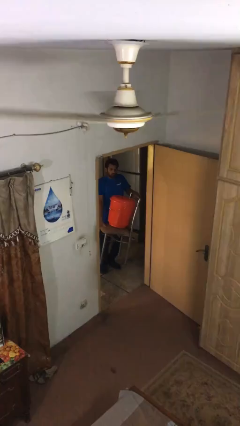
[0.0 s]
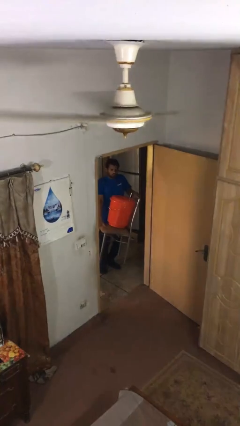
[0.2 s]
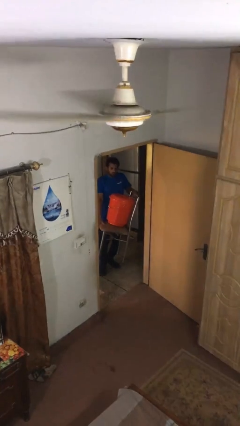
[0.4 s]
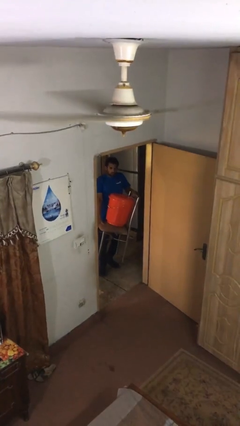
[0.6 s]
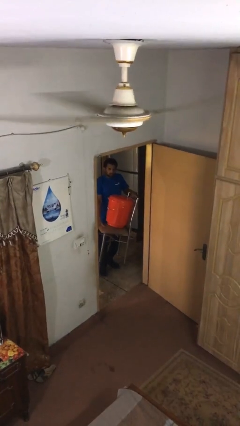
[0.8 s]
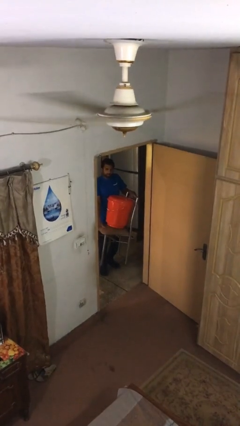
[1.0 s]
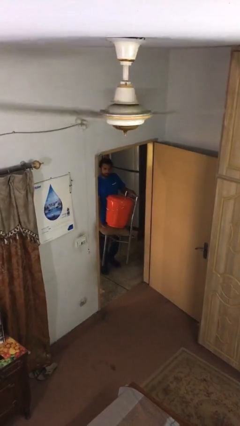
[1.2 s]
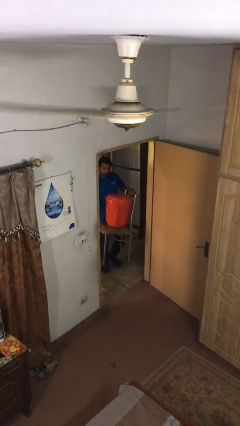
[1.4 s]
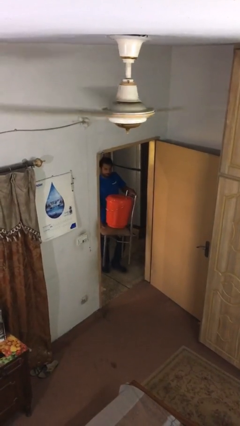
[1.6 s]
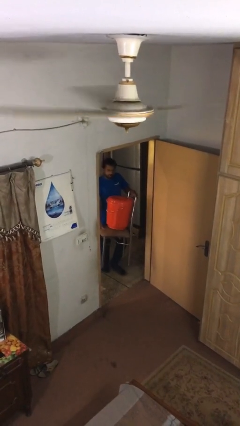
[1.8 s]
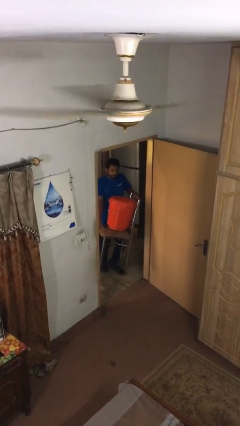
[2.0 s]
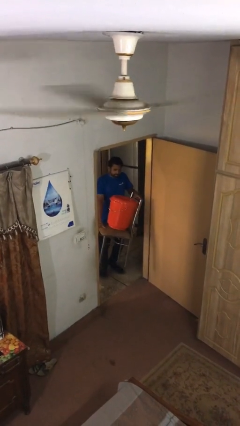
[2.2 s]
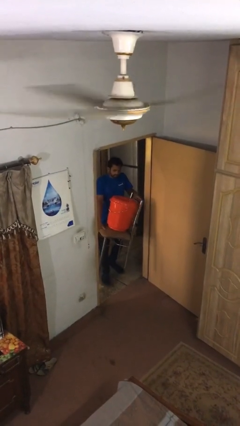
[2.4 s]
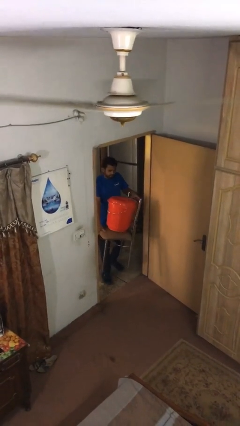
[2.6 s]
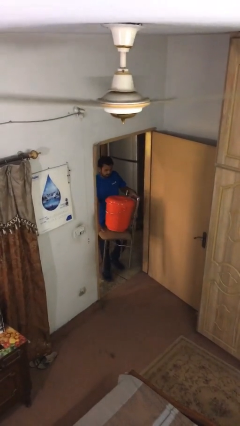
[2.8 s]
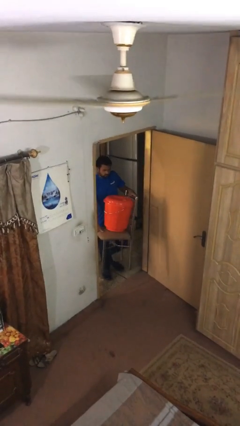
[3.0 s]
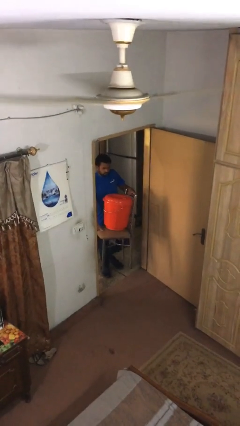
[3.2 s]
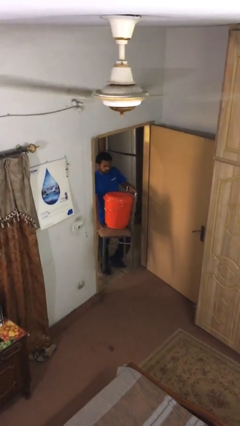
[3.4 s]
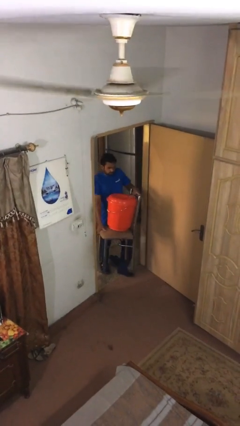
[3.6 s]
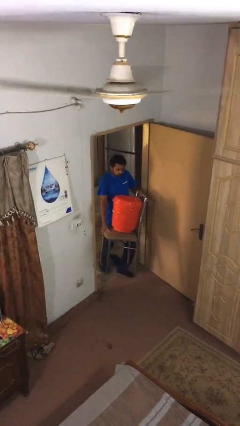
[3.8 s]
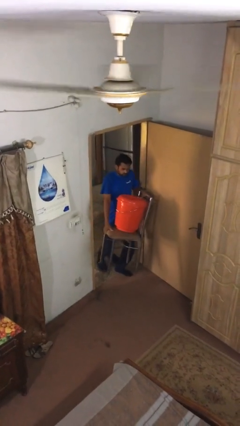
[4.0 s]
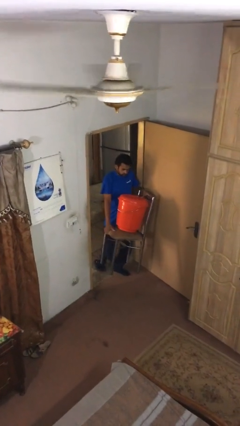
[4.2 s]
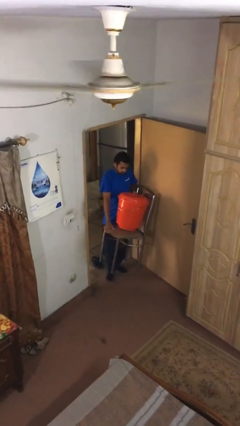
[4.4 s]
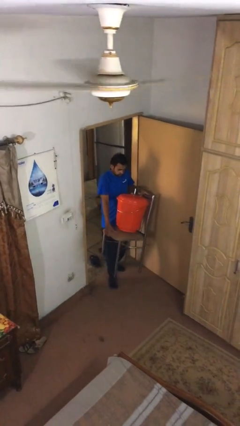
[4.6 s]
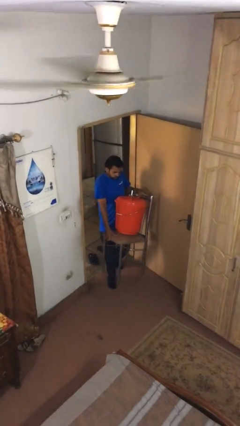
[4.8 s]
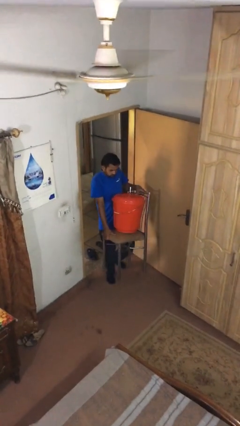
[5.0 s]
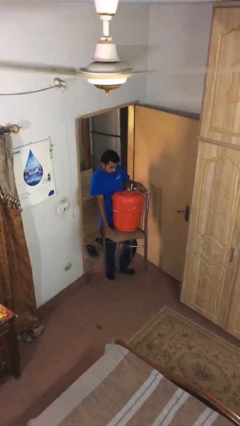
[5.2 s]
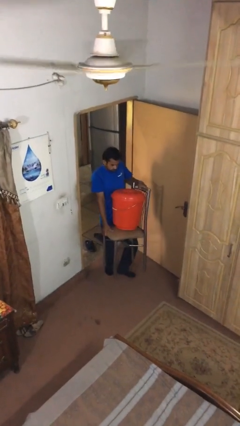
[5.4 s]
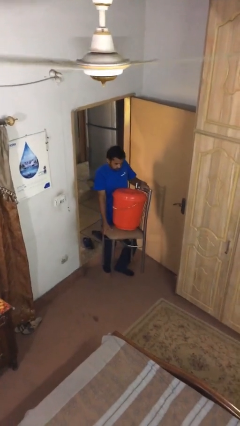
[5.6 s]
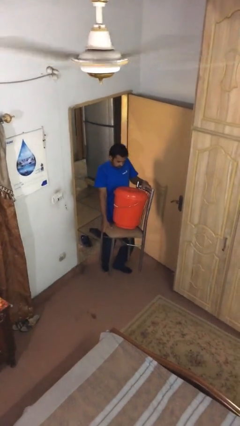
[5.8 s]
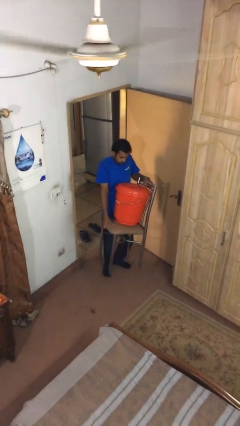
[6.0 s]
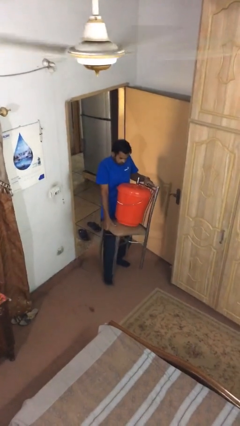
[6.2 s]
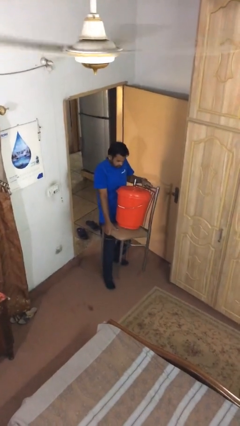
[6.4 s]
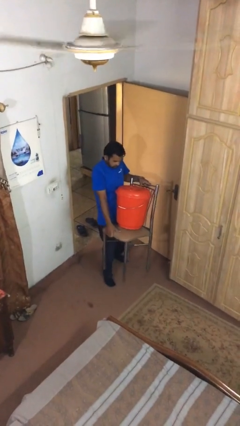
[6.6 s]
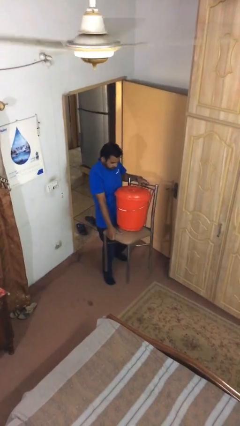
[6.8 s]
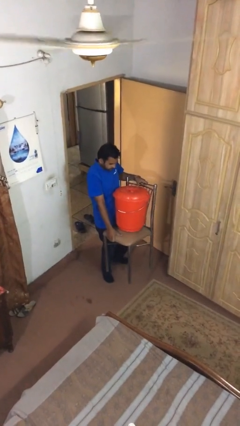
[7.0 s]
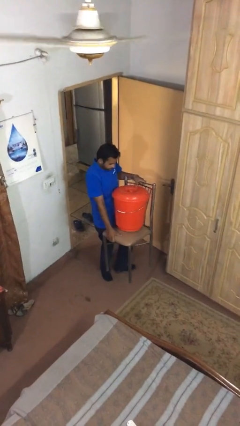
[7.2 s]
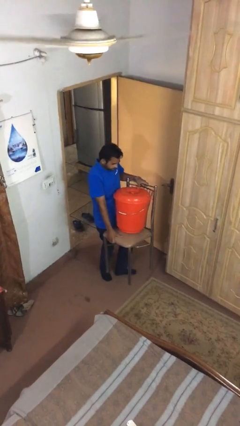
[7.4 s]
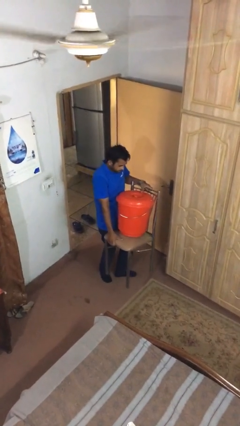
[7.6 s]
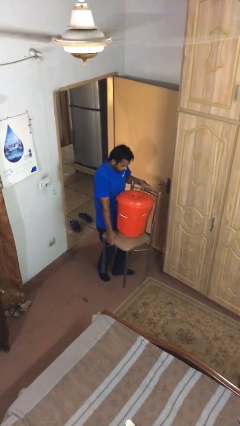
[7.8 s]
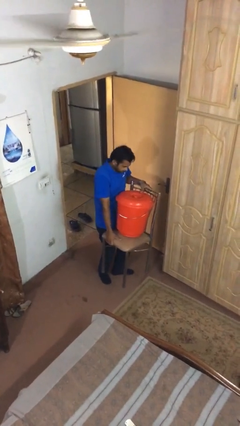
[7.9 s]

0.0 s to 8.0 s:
person carries heavy object

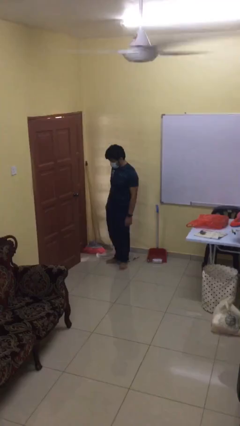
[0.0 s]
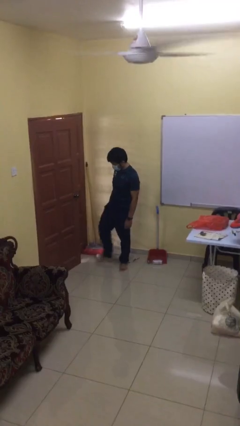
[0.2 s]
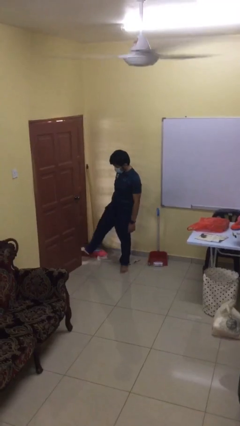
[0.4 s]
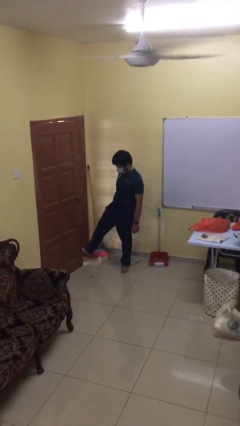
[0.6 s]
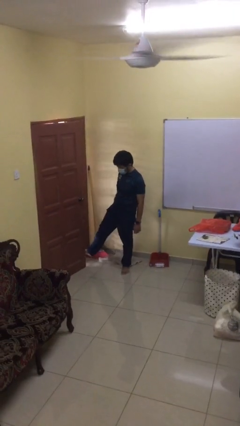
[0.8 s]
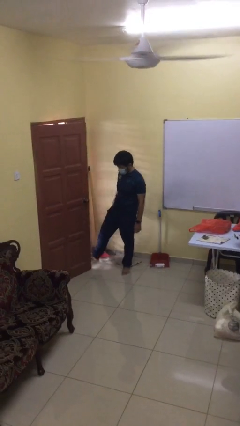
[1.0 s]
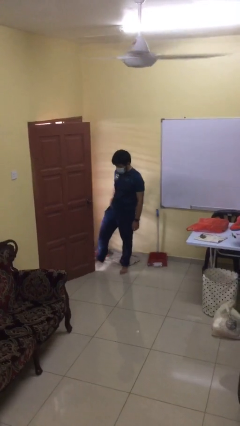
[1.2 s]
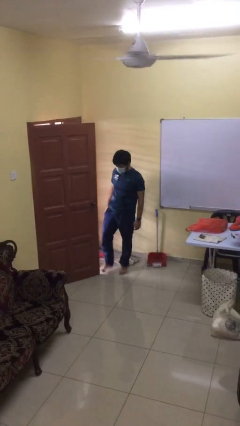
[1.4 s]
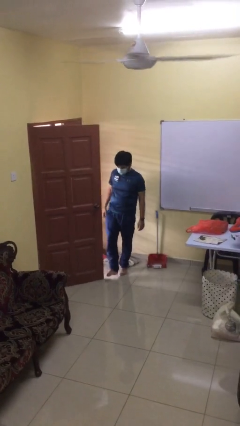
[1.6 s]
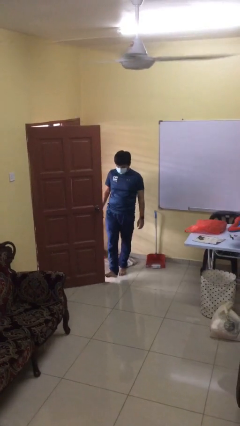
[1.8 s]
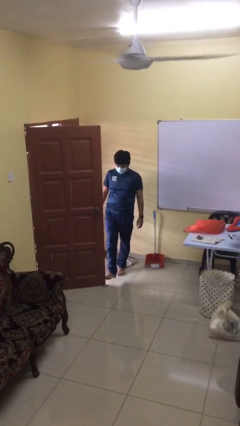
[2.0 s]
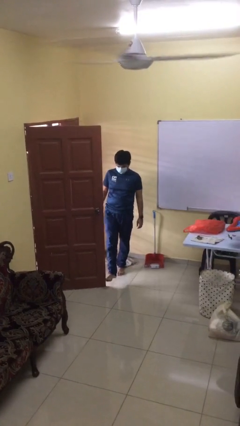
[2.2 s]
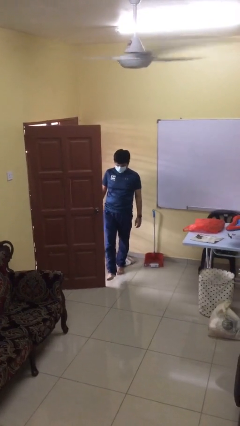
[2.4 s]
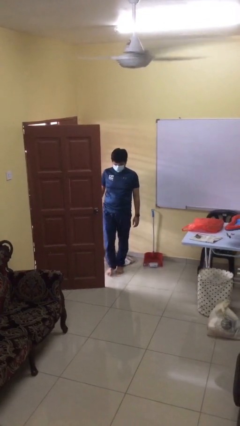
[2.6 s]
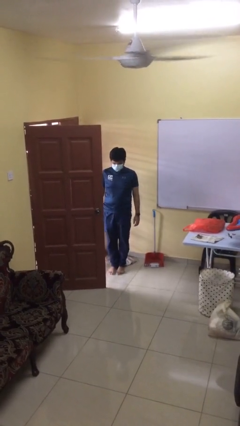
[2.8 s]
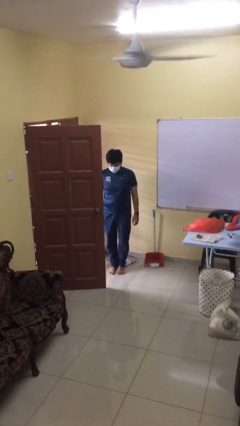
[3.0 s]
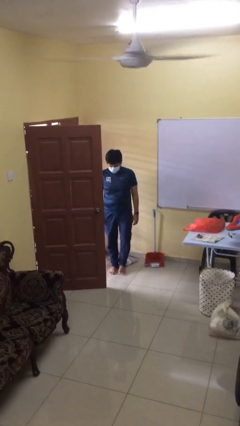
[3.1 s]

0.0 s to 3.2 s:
person opens facility door

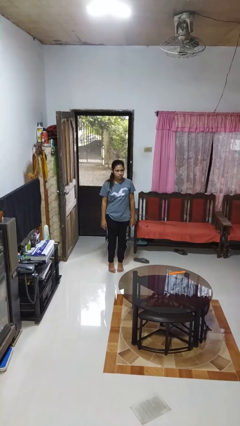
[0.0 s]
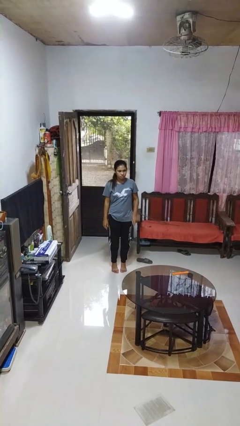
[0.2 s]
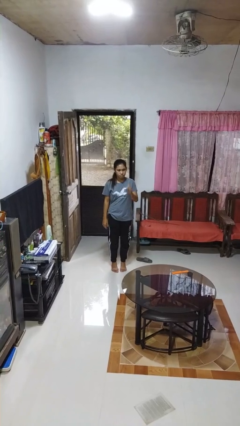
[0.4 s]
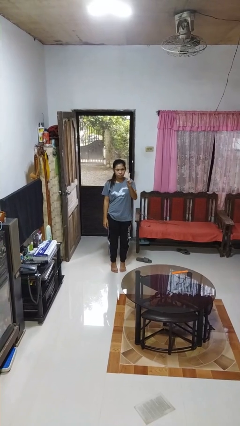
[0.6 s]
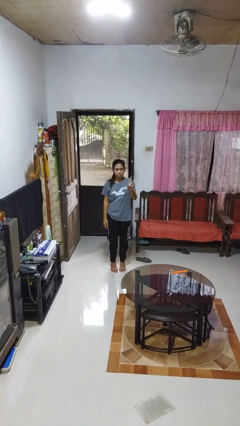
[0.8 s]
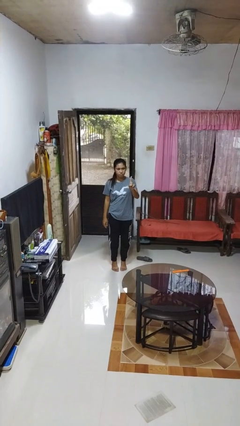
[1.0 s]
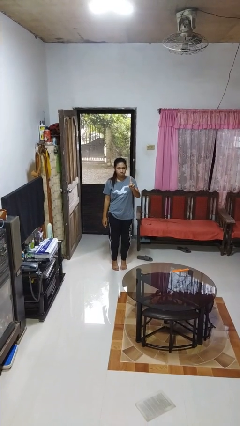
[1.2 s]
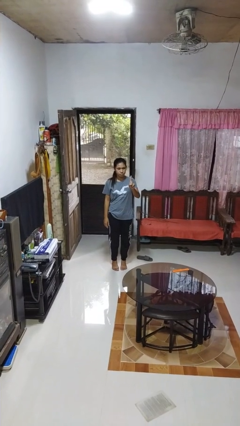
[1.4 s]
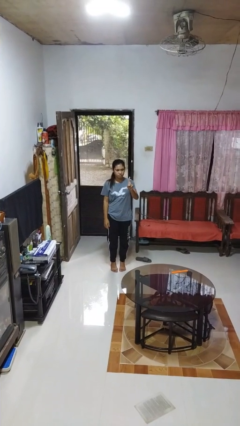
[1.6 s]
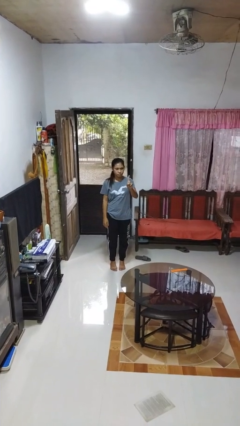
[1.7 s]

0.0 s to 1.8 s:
person gestures number one

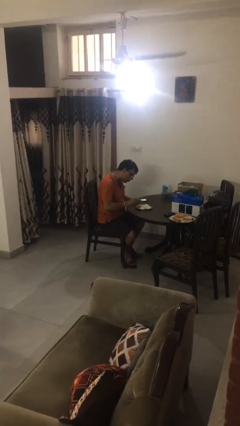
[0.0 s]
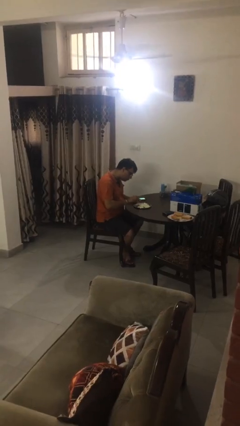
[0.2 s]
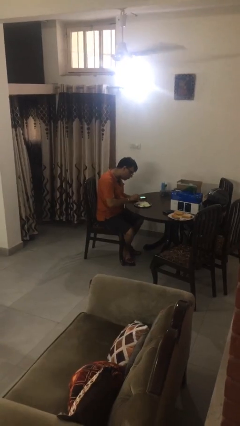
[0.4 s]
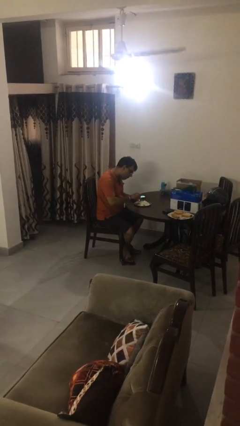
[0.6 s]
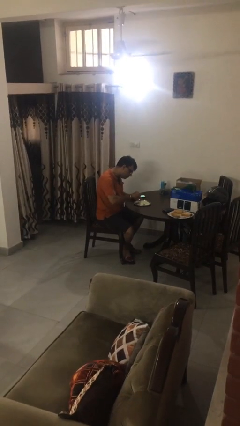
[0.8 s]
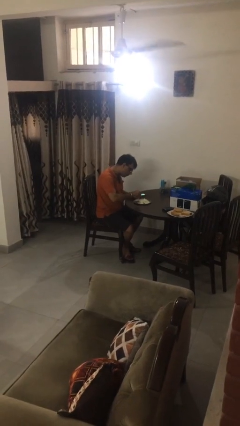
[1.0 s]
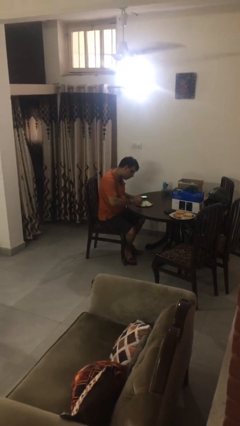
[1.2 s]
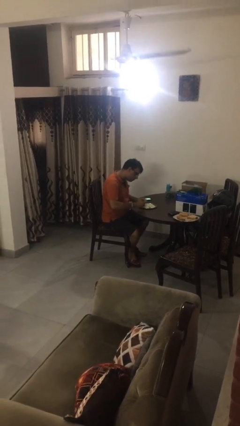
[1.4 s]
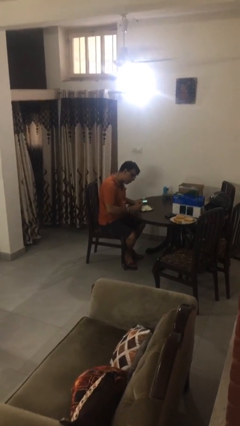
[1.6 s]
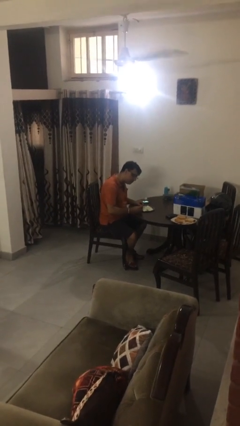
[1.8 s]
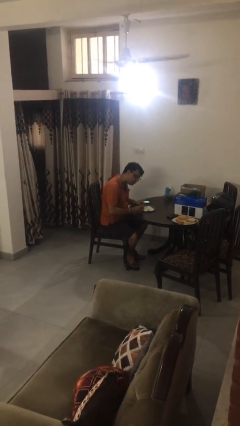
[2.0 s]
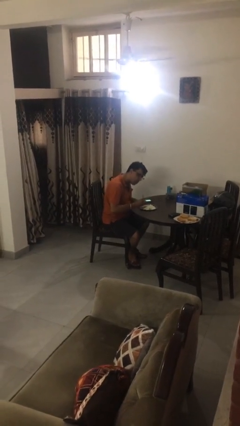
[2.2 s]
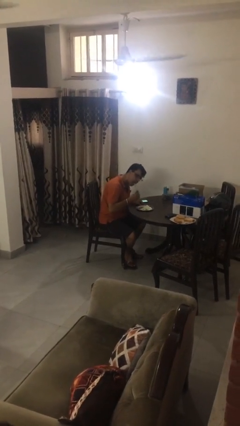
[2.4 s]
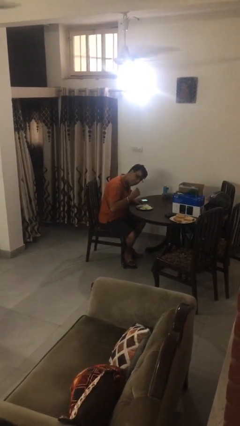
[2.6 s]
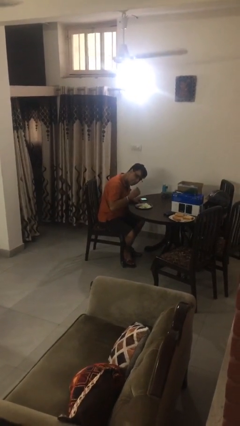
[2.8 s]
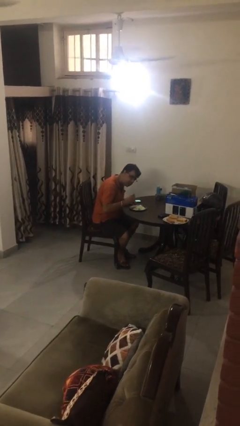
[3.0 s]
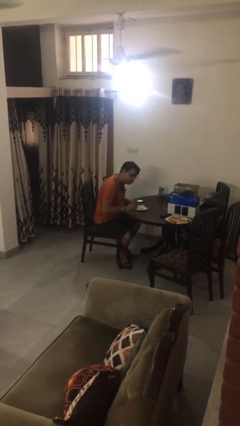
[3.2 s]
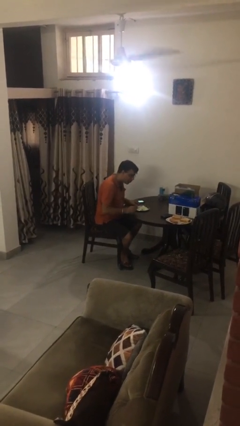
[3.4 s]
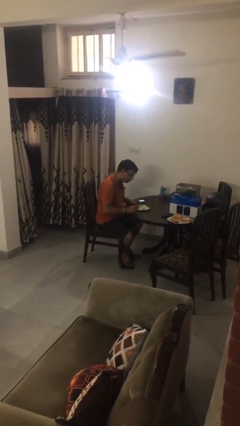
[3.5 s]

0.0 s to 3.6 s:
person eats with utensil

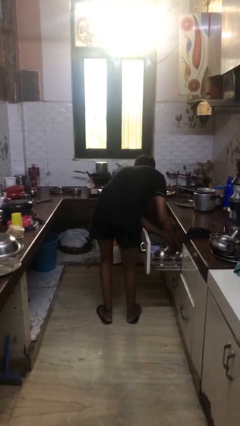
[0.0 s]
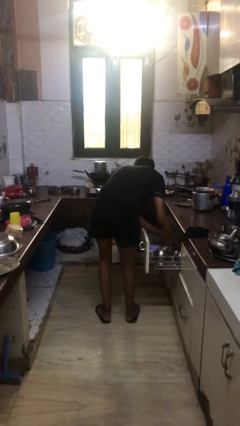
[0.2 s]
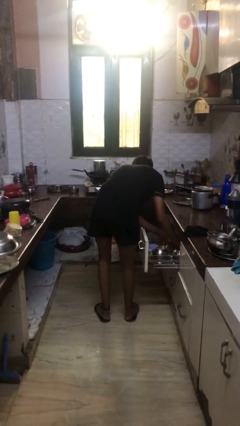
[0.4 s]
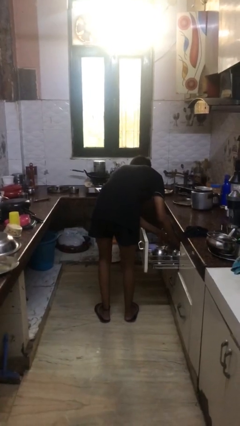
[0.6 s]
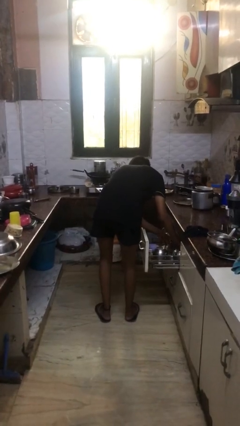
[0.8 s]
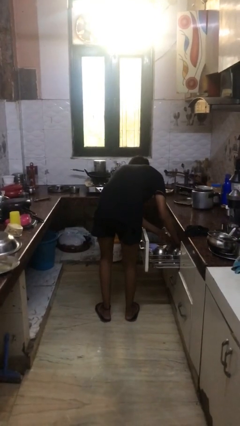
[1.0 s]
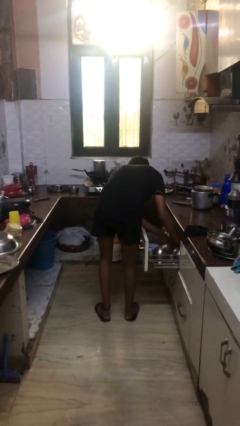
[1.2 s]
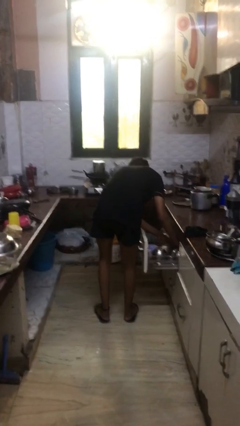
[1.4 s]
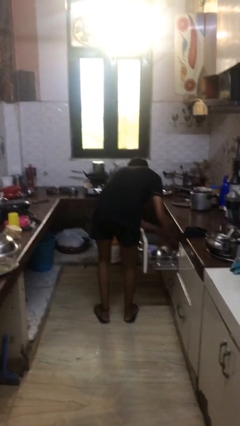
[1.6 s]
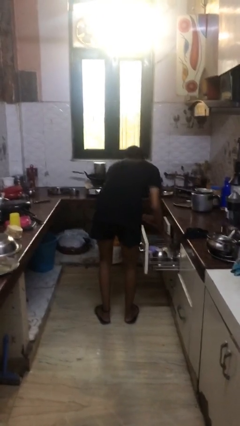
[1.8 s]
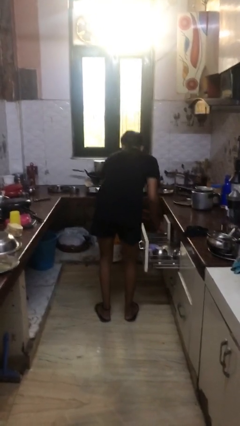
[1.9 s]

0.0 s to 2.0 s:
person searches in kitchen drawer
